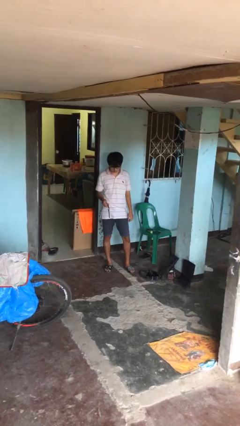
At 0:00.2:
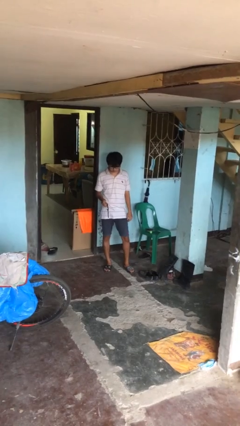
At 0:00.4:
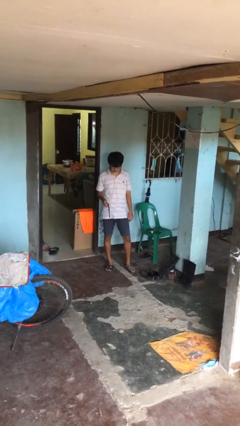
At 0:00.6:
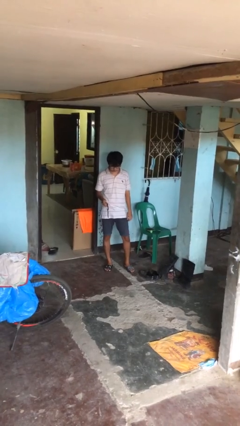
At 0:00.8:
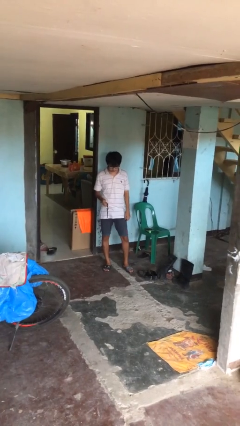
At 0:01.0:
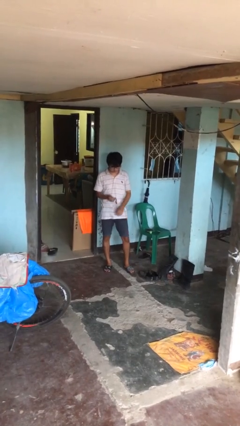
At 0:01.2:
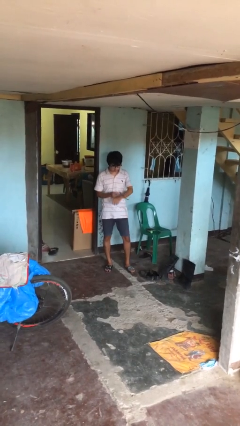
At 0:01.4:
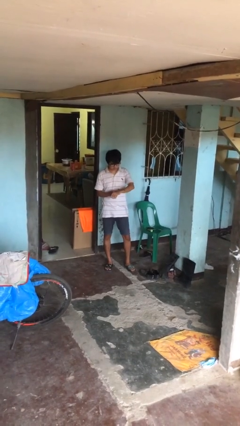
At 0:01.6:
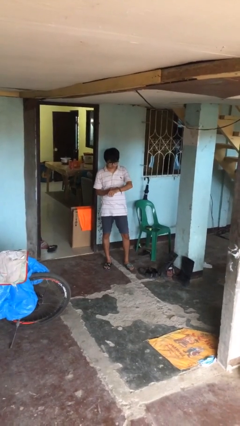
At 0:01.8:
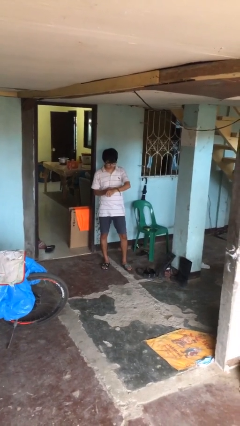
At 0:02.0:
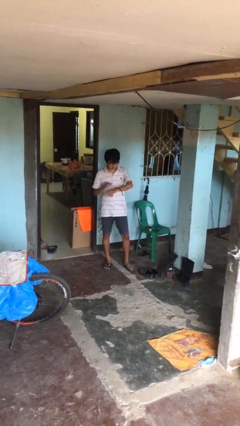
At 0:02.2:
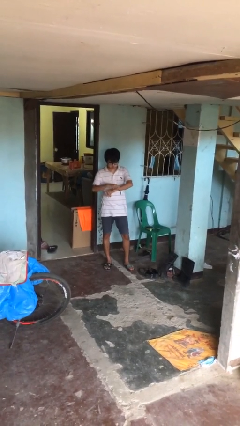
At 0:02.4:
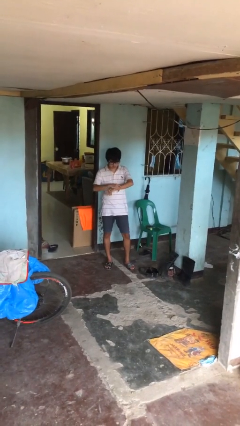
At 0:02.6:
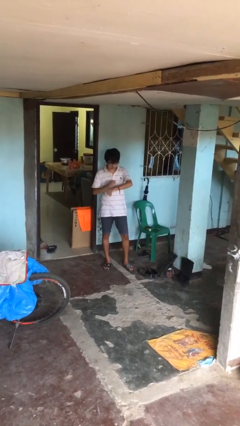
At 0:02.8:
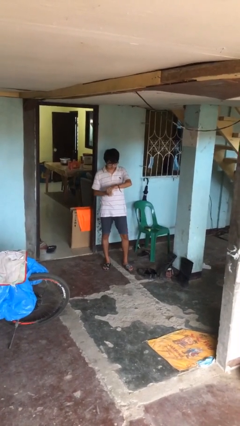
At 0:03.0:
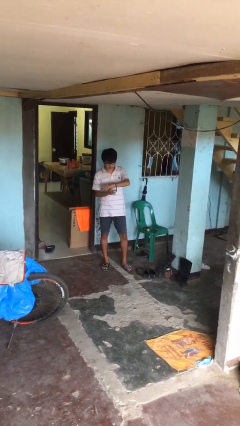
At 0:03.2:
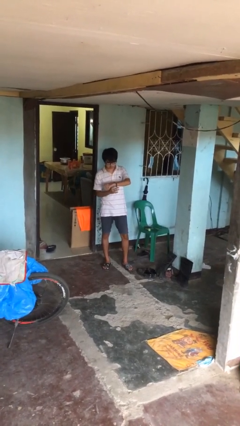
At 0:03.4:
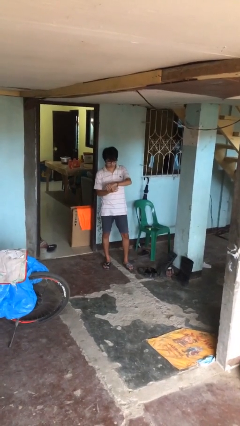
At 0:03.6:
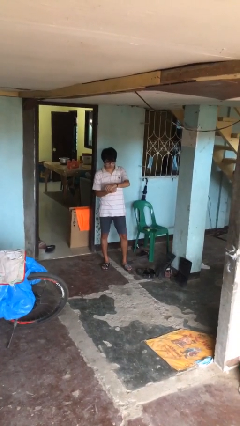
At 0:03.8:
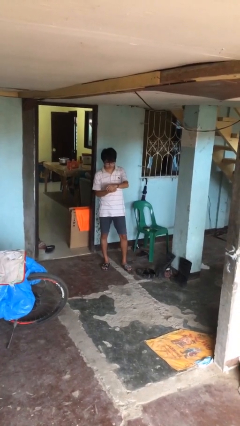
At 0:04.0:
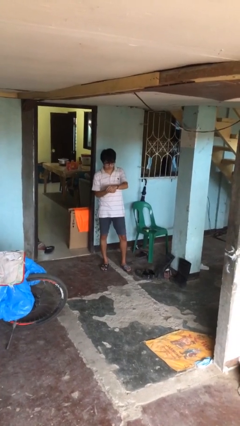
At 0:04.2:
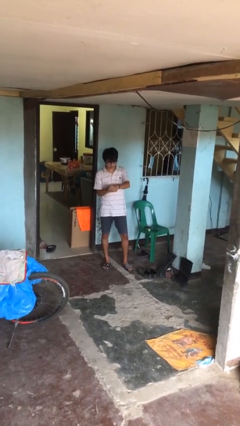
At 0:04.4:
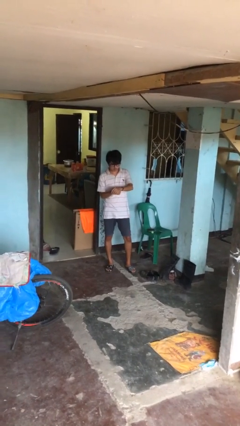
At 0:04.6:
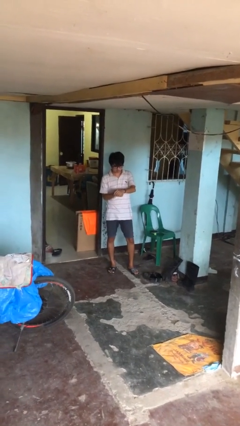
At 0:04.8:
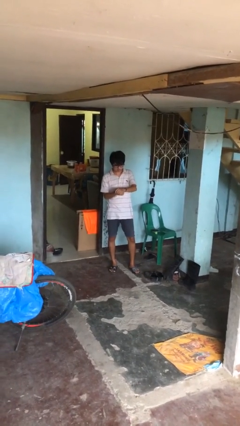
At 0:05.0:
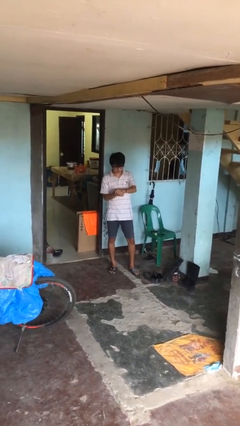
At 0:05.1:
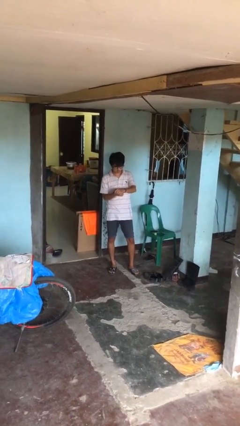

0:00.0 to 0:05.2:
person puts on wristwatch

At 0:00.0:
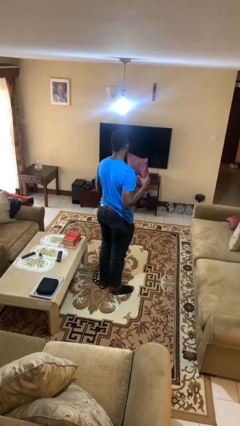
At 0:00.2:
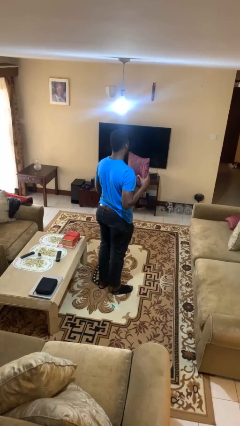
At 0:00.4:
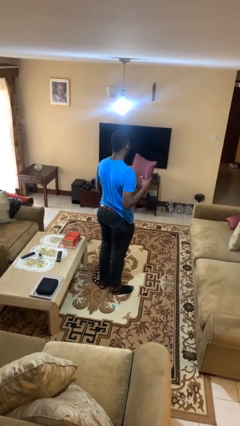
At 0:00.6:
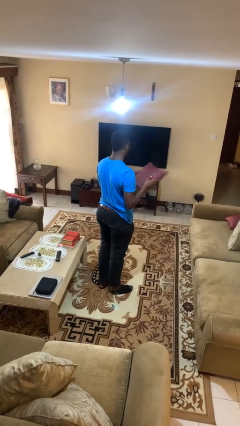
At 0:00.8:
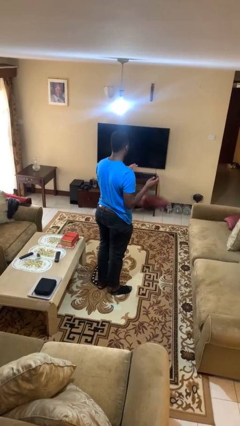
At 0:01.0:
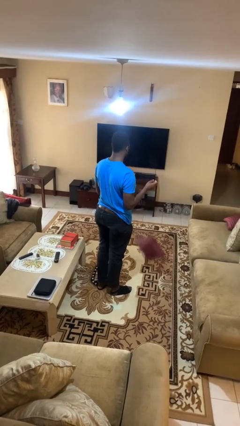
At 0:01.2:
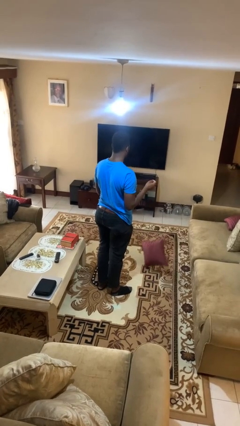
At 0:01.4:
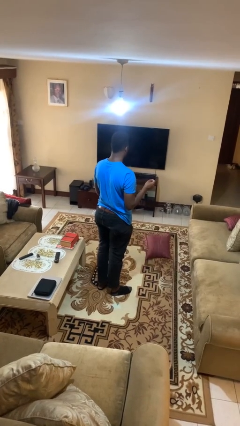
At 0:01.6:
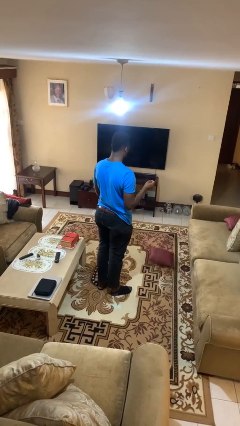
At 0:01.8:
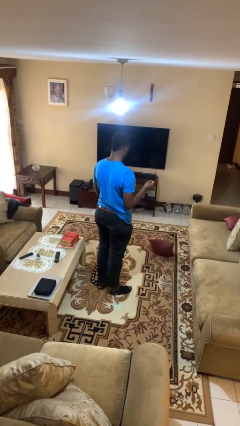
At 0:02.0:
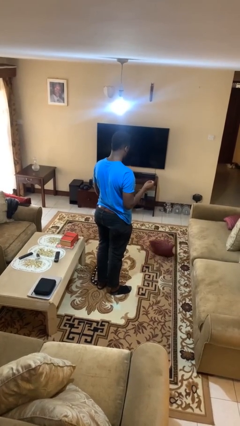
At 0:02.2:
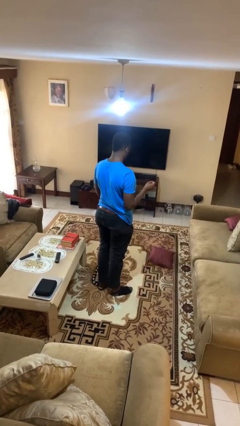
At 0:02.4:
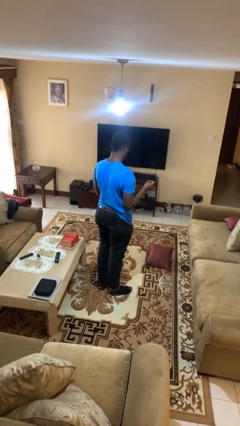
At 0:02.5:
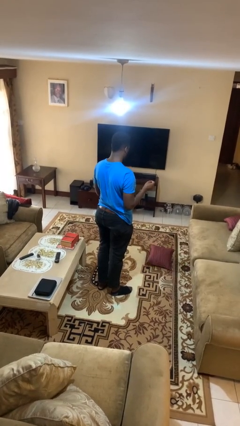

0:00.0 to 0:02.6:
person drops object

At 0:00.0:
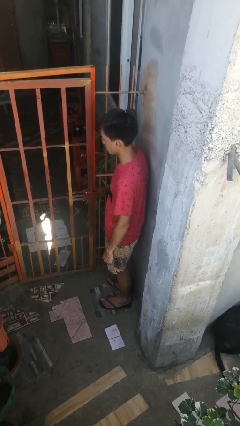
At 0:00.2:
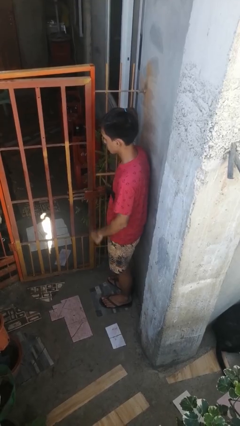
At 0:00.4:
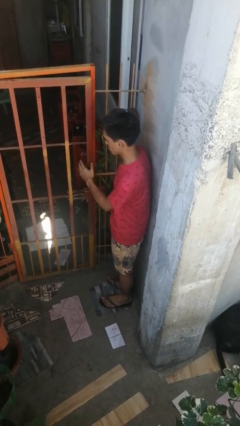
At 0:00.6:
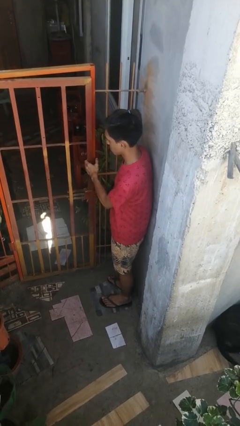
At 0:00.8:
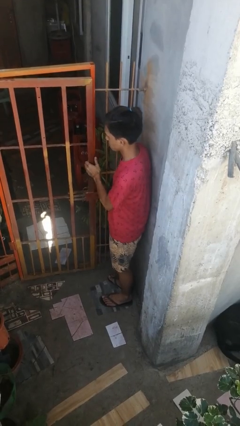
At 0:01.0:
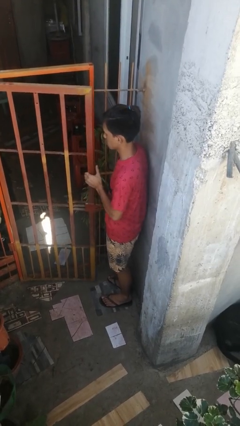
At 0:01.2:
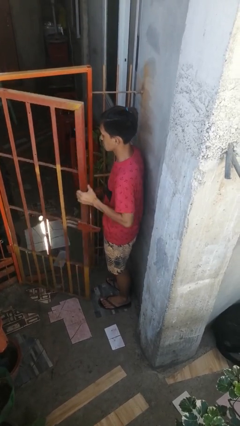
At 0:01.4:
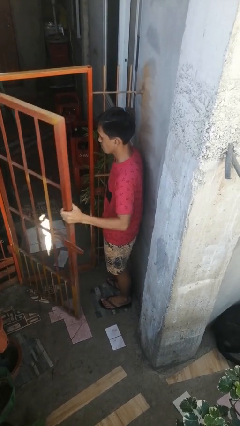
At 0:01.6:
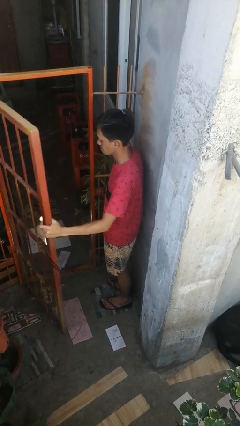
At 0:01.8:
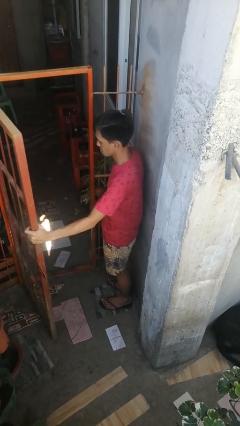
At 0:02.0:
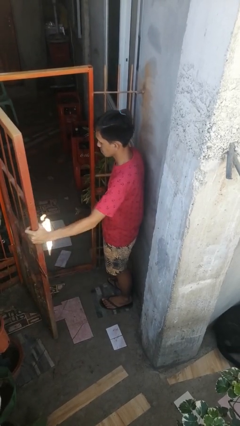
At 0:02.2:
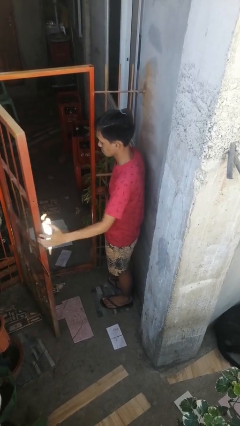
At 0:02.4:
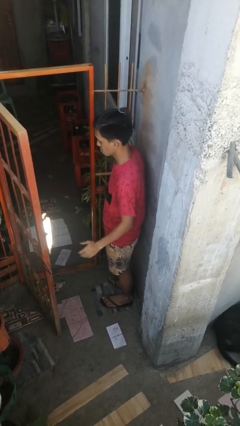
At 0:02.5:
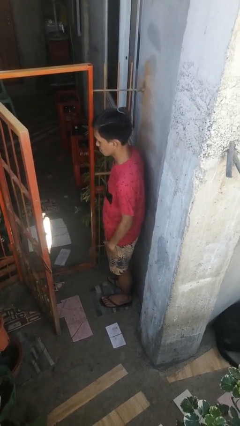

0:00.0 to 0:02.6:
person opens gate

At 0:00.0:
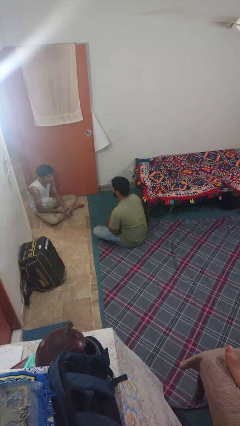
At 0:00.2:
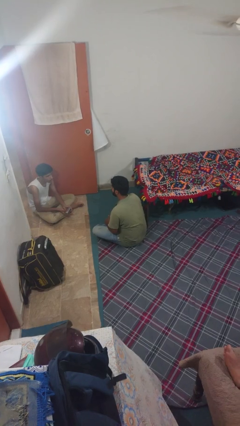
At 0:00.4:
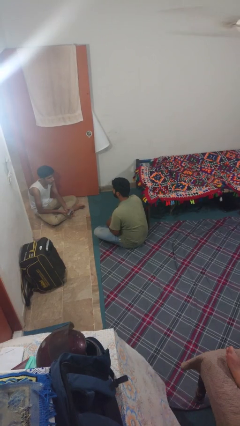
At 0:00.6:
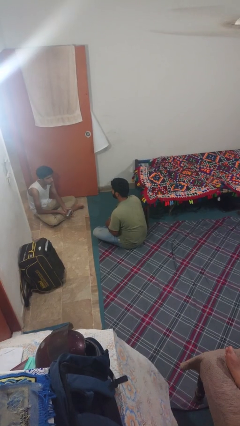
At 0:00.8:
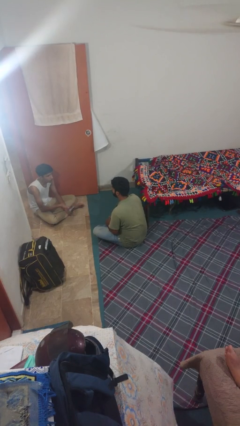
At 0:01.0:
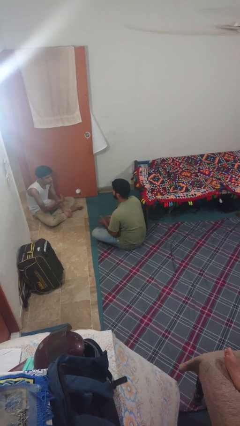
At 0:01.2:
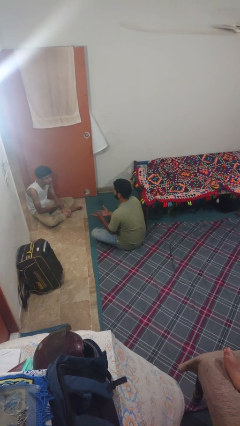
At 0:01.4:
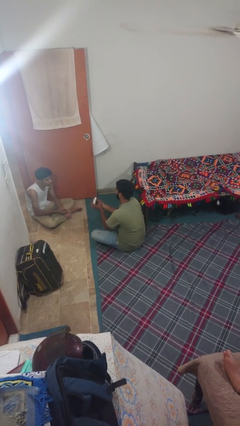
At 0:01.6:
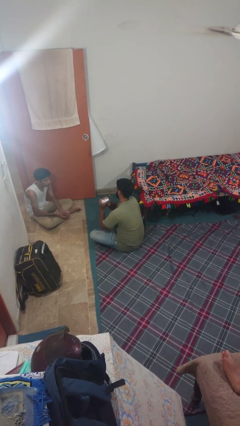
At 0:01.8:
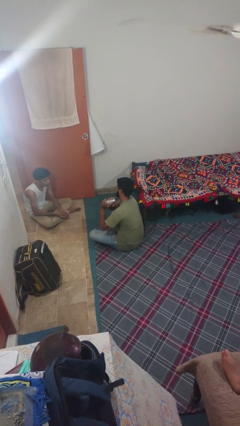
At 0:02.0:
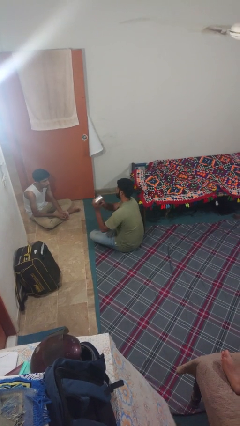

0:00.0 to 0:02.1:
person catches object from person

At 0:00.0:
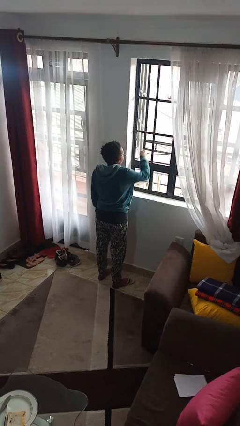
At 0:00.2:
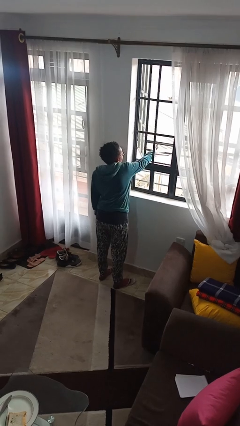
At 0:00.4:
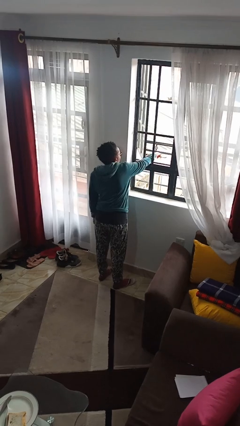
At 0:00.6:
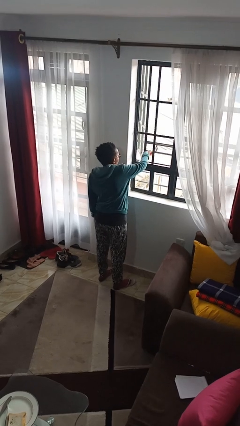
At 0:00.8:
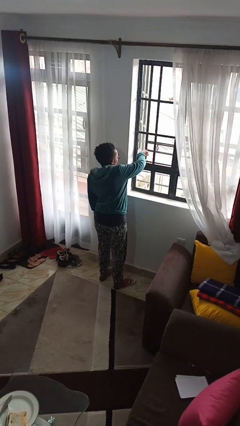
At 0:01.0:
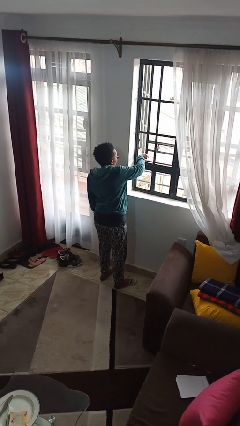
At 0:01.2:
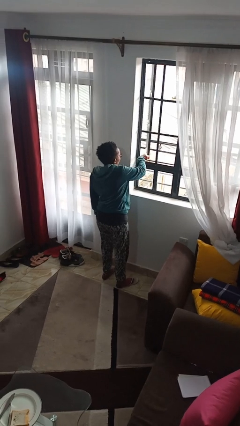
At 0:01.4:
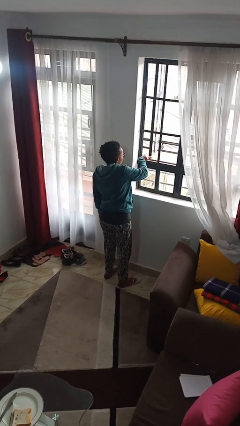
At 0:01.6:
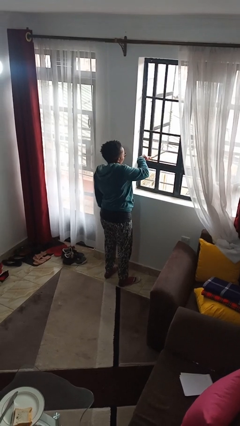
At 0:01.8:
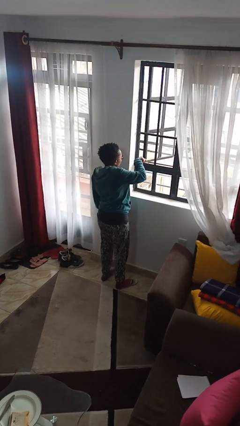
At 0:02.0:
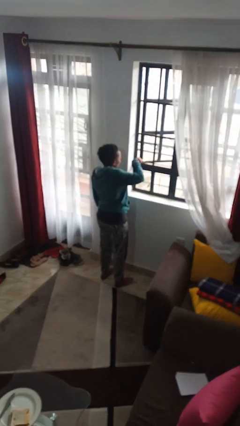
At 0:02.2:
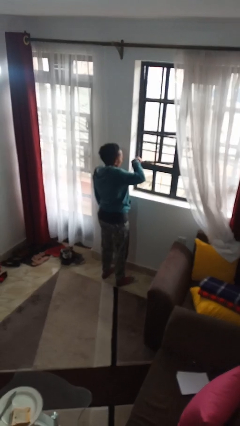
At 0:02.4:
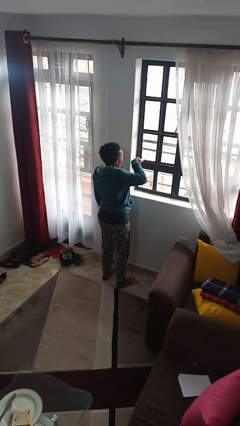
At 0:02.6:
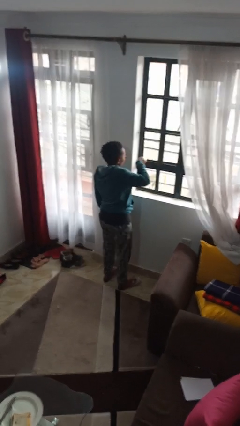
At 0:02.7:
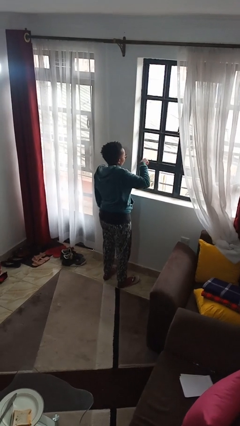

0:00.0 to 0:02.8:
person closes home window

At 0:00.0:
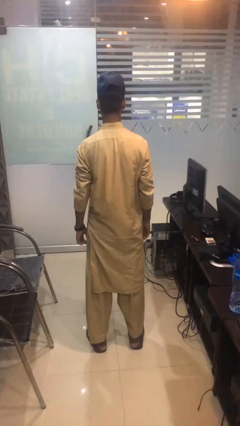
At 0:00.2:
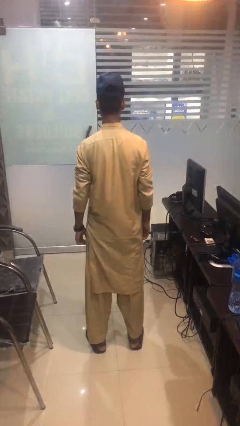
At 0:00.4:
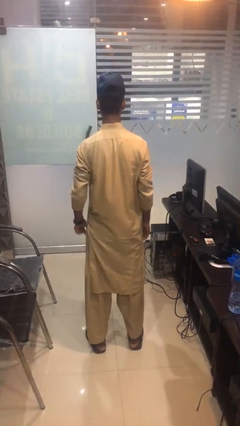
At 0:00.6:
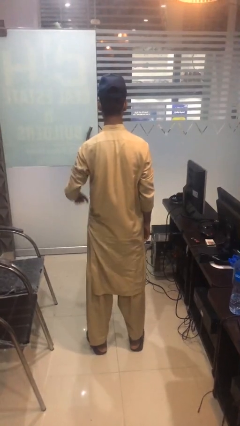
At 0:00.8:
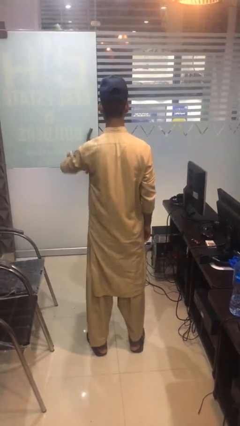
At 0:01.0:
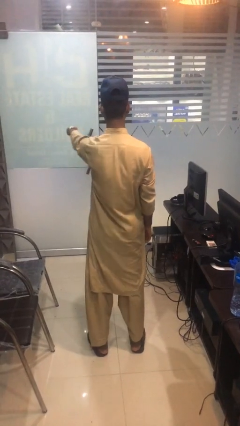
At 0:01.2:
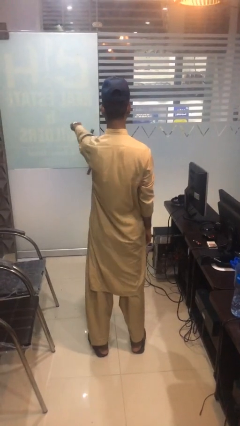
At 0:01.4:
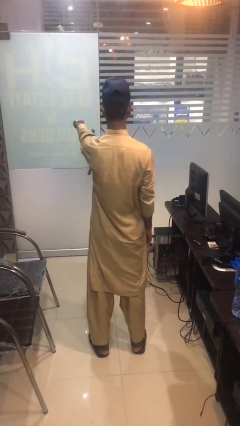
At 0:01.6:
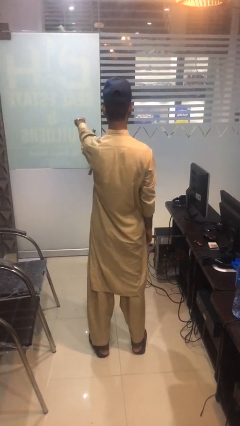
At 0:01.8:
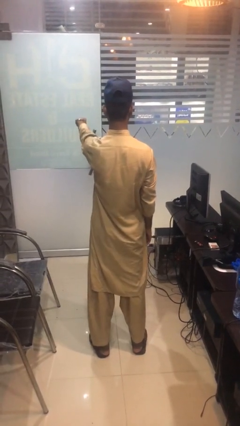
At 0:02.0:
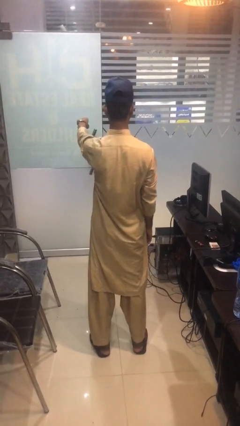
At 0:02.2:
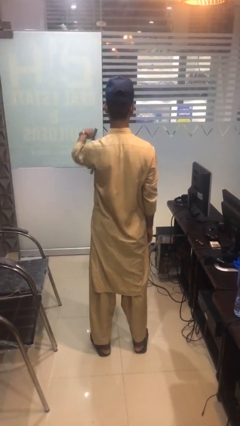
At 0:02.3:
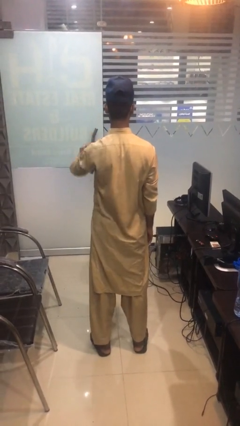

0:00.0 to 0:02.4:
person points at person
